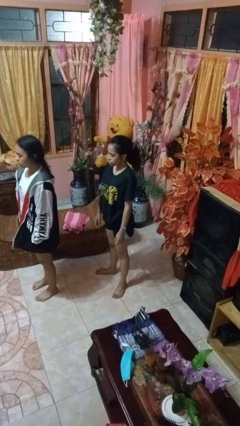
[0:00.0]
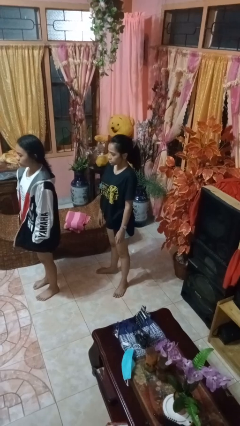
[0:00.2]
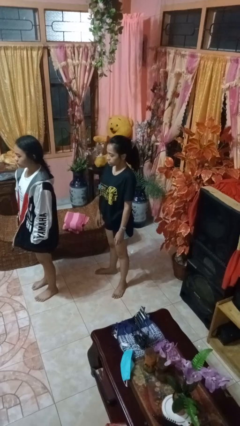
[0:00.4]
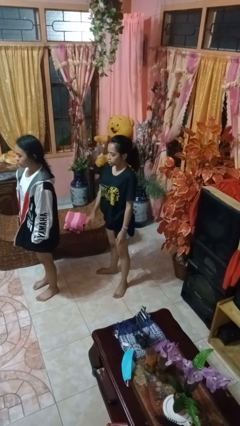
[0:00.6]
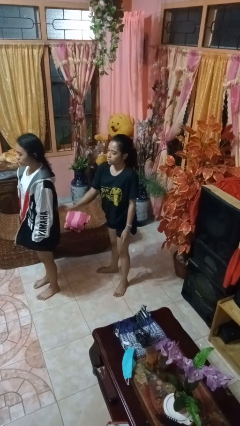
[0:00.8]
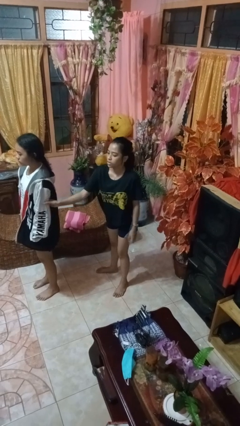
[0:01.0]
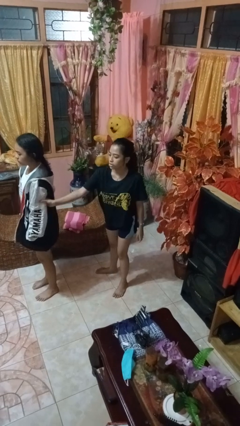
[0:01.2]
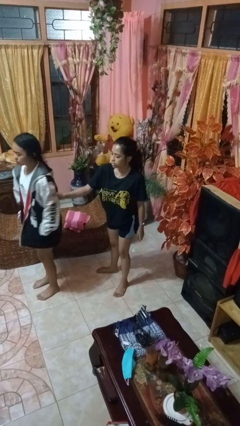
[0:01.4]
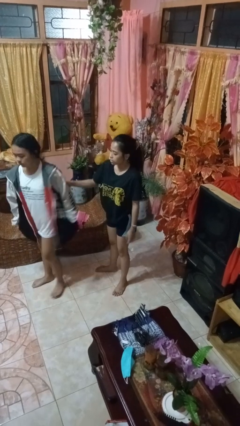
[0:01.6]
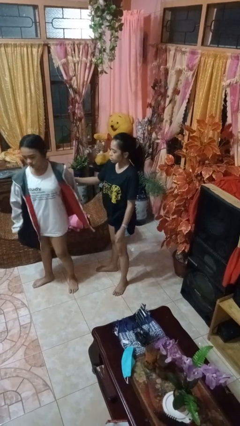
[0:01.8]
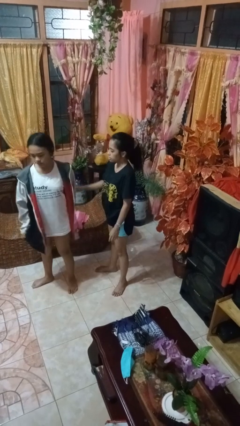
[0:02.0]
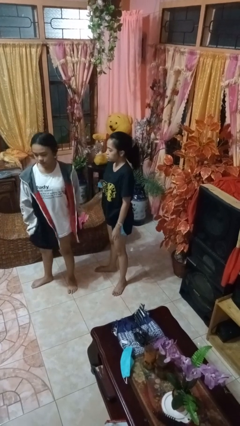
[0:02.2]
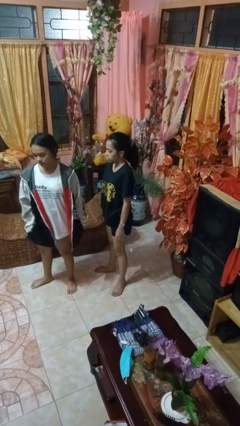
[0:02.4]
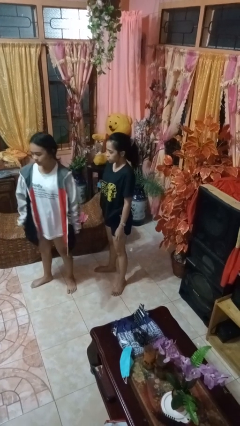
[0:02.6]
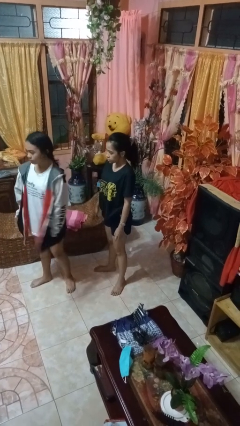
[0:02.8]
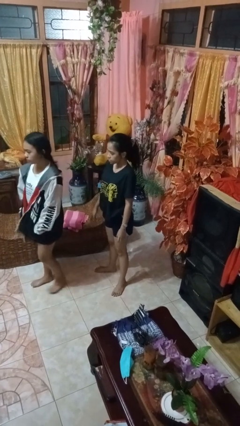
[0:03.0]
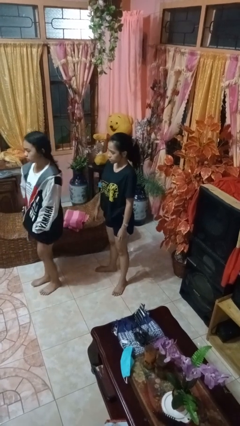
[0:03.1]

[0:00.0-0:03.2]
person grabs person by bicep

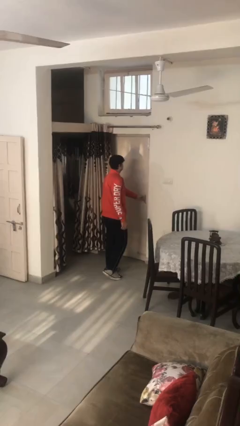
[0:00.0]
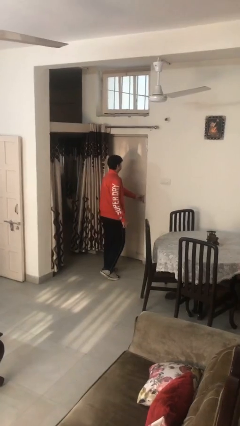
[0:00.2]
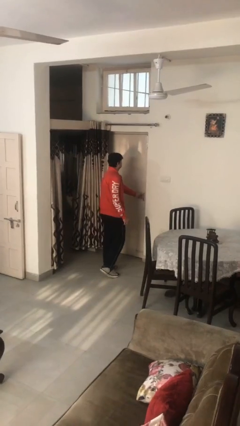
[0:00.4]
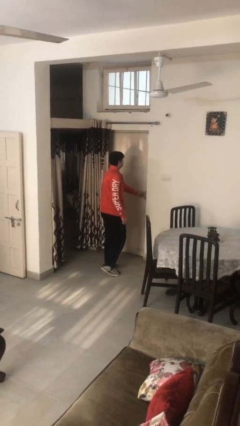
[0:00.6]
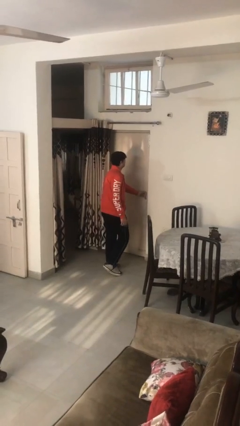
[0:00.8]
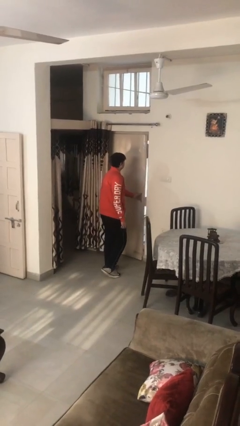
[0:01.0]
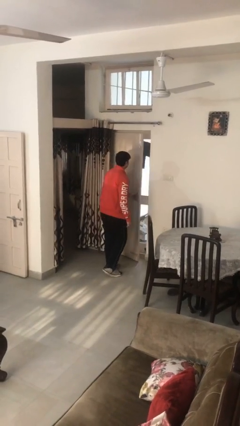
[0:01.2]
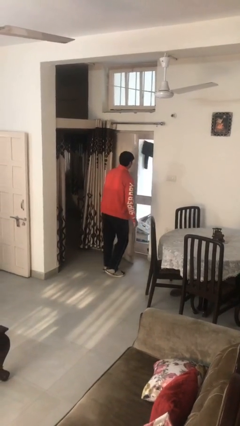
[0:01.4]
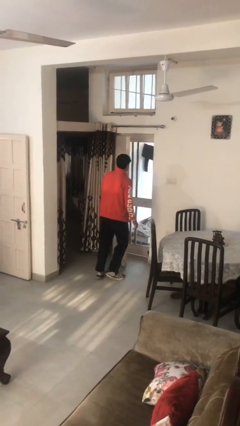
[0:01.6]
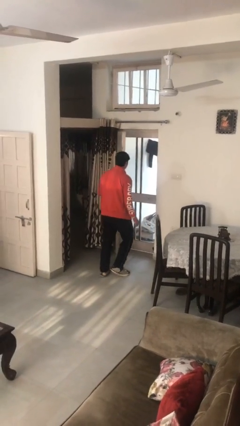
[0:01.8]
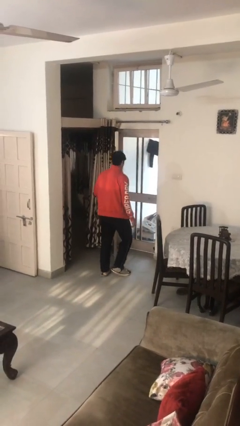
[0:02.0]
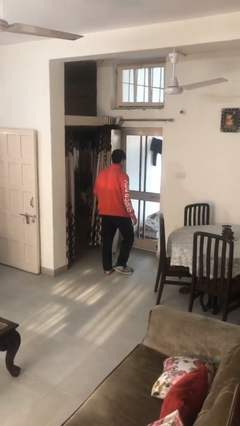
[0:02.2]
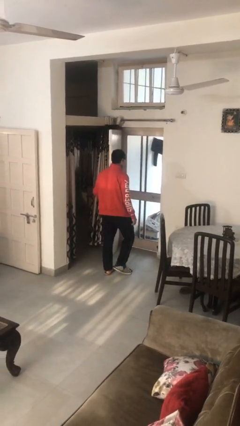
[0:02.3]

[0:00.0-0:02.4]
person opens facility door

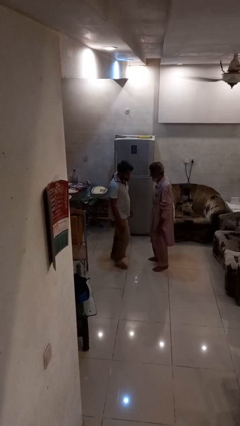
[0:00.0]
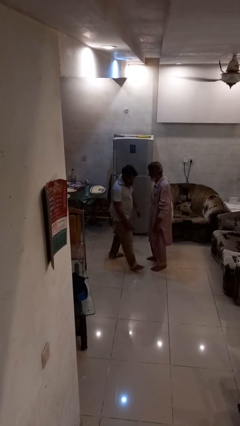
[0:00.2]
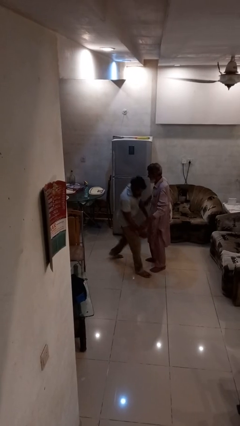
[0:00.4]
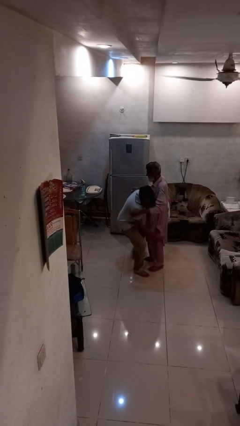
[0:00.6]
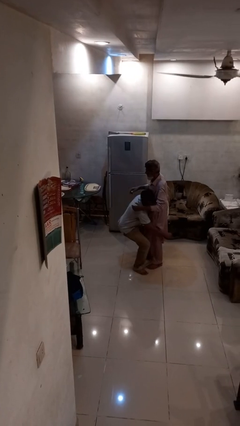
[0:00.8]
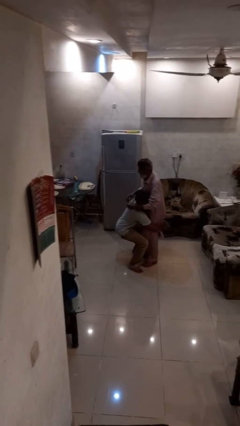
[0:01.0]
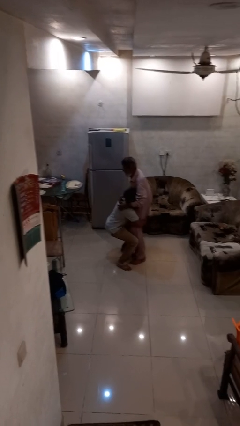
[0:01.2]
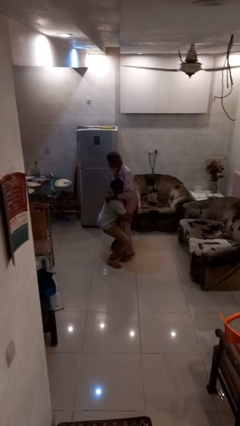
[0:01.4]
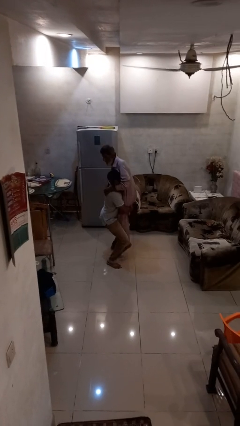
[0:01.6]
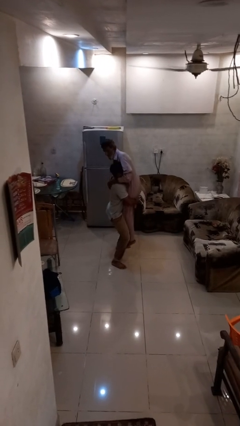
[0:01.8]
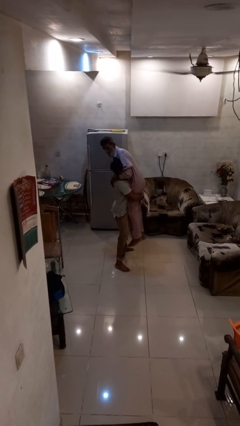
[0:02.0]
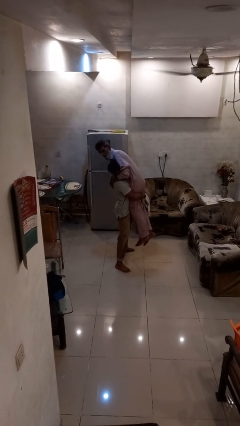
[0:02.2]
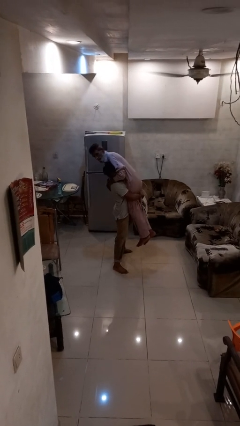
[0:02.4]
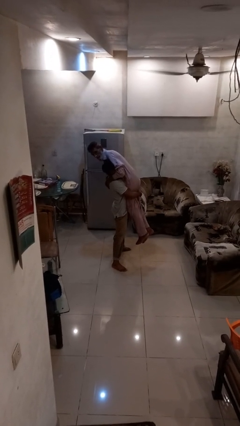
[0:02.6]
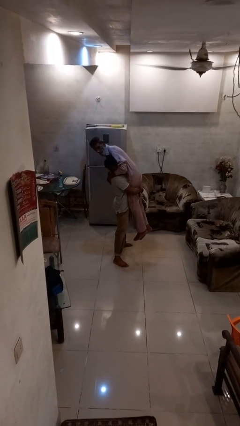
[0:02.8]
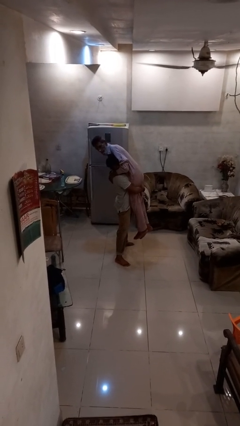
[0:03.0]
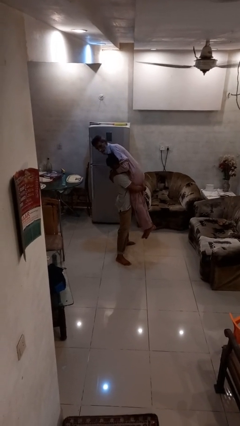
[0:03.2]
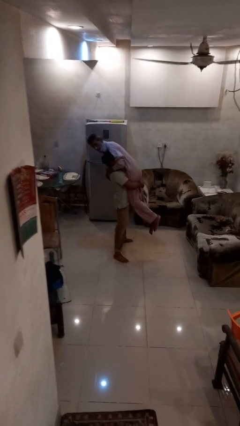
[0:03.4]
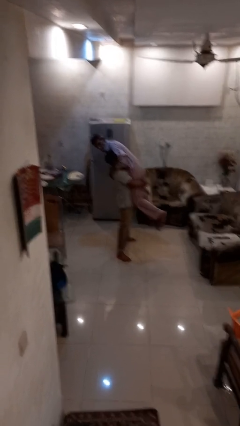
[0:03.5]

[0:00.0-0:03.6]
person picks up person

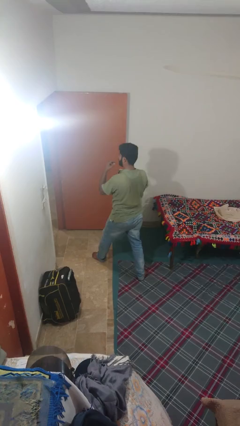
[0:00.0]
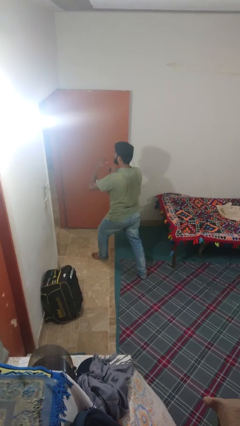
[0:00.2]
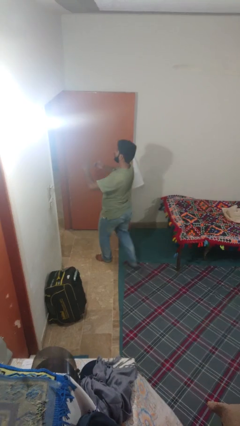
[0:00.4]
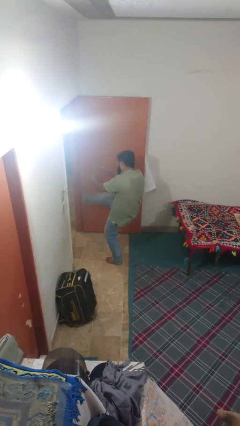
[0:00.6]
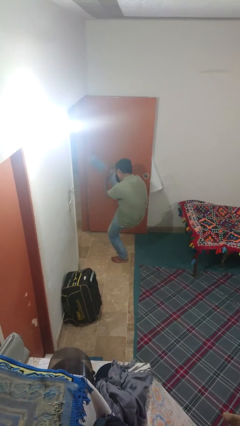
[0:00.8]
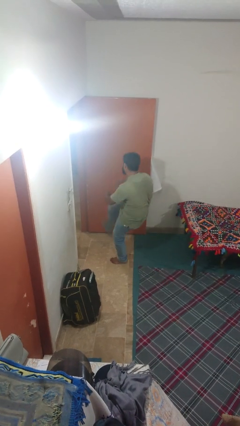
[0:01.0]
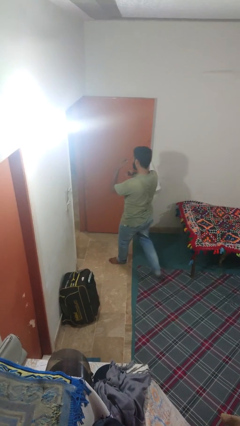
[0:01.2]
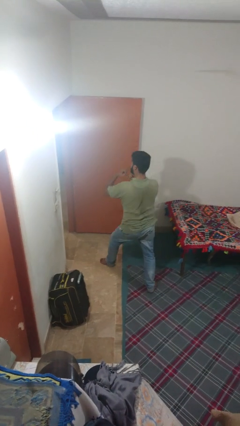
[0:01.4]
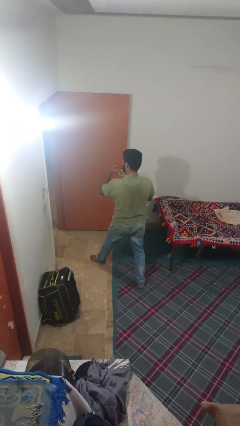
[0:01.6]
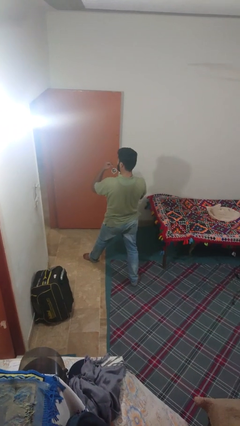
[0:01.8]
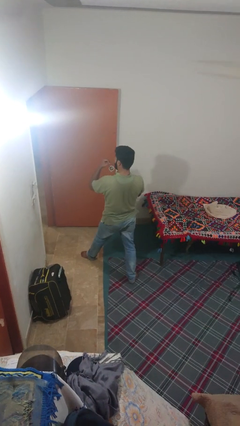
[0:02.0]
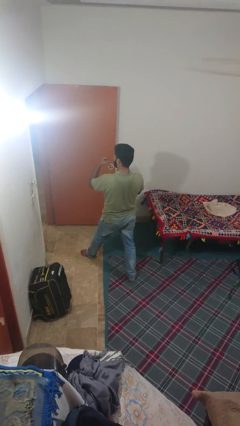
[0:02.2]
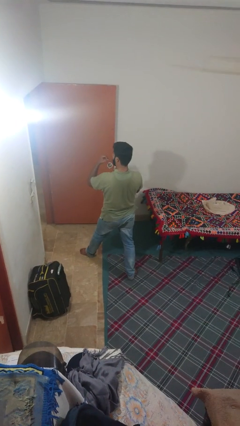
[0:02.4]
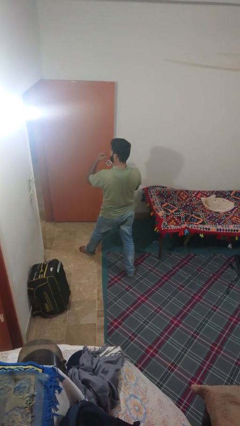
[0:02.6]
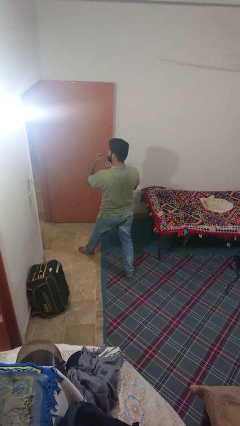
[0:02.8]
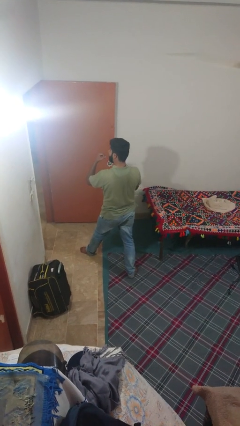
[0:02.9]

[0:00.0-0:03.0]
person karate kicks

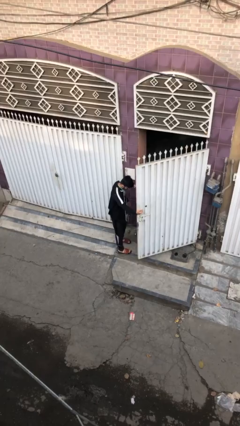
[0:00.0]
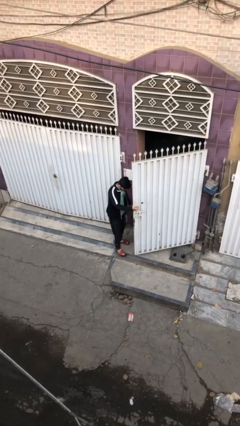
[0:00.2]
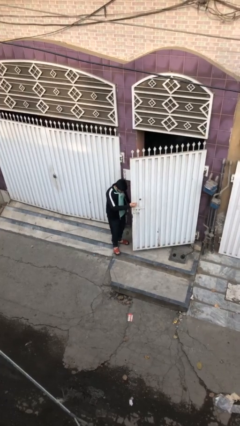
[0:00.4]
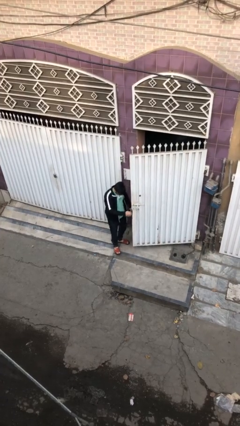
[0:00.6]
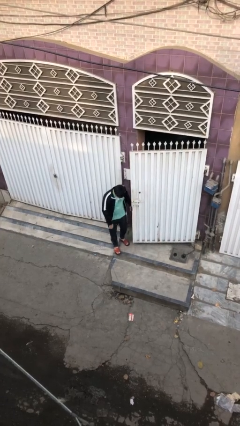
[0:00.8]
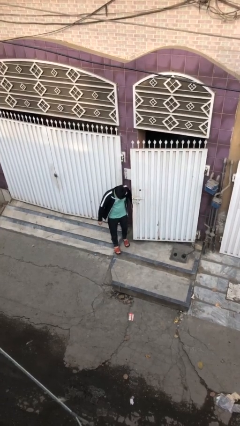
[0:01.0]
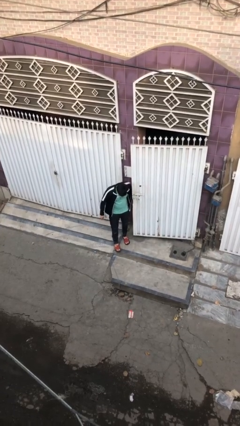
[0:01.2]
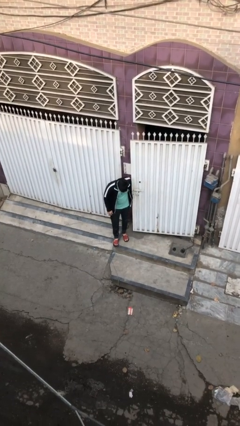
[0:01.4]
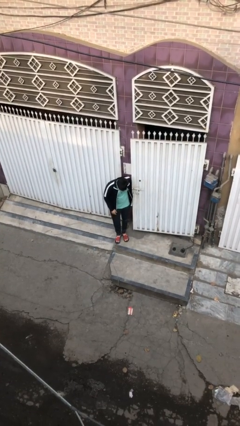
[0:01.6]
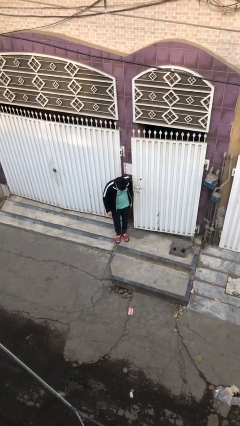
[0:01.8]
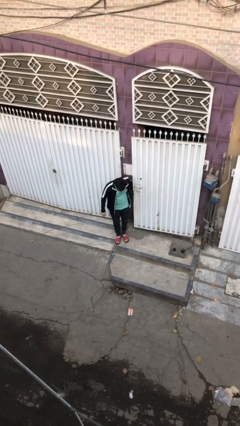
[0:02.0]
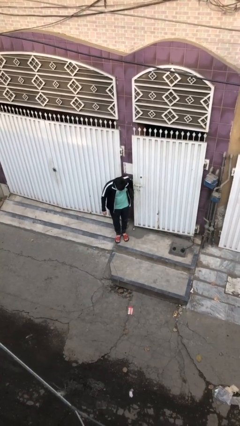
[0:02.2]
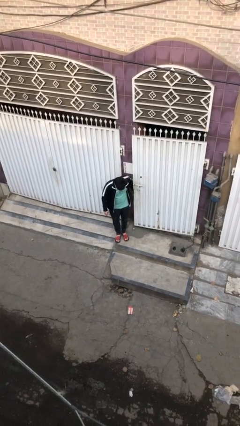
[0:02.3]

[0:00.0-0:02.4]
person closes facility door

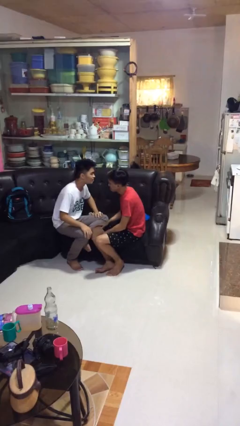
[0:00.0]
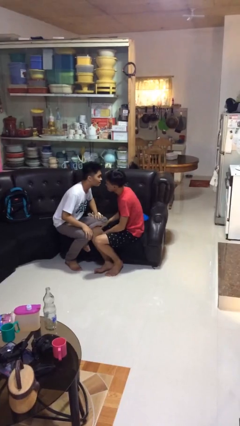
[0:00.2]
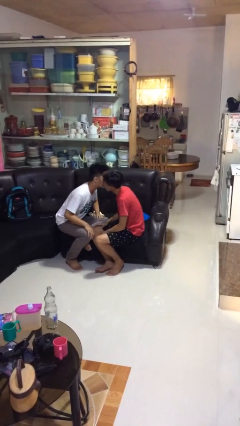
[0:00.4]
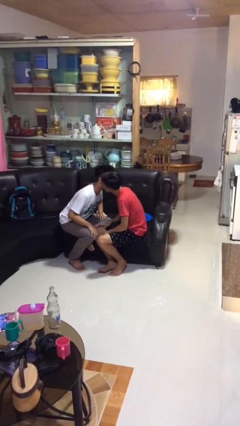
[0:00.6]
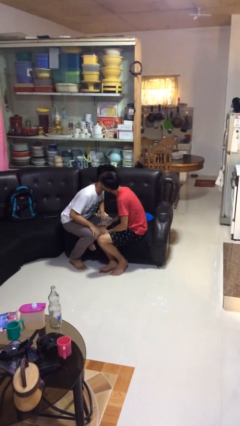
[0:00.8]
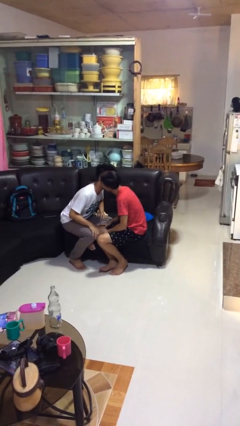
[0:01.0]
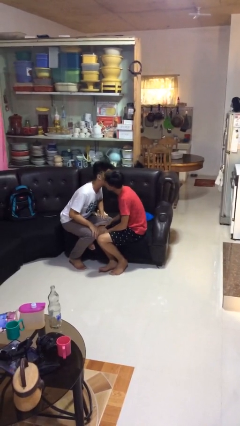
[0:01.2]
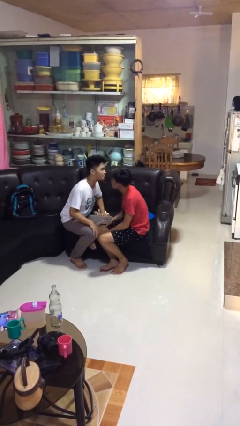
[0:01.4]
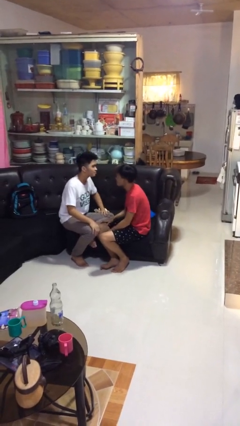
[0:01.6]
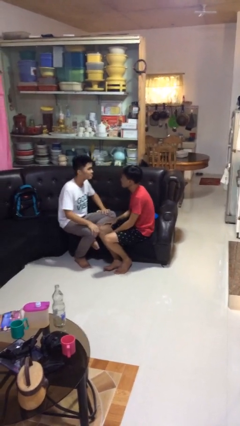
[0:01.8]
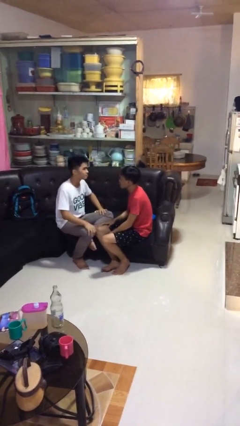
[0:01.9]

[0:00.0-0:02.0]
person kisses cheek of person

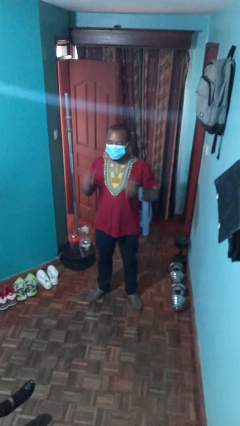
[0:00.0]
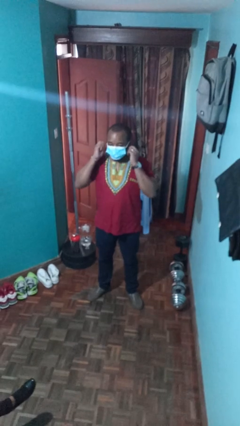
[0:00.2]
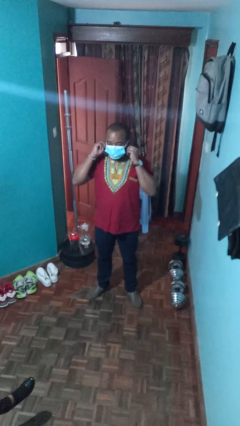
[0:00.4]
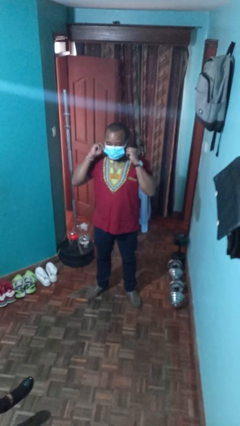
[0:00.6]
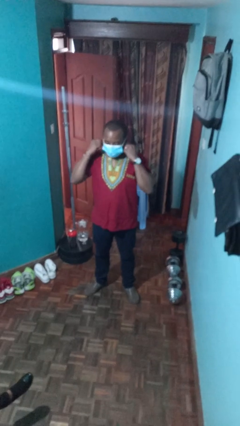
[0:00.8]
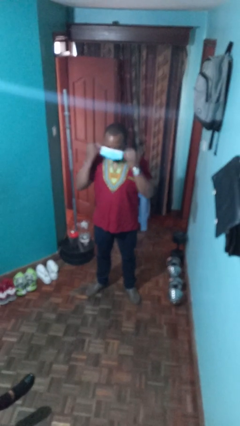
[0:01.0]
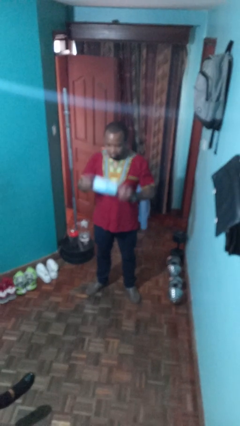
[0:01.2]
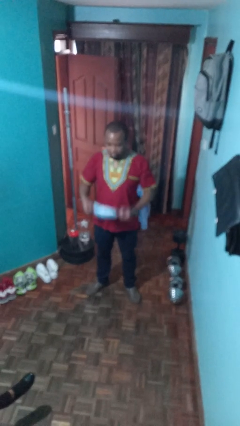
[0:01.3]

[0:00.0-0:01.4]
person takes off facemask
